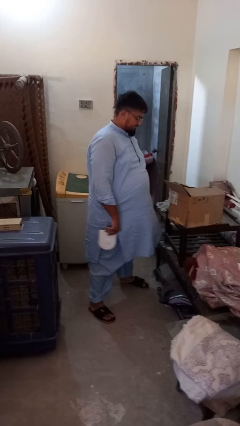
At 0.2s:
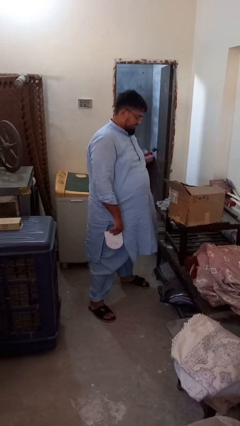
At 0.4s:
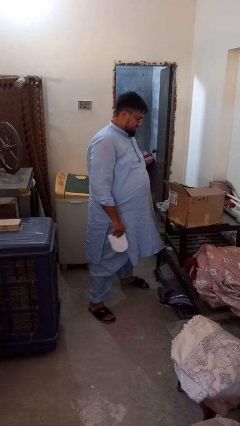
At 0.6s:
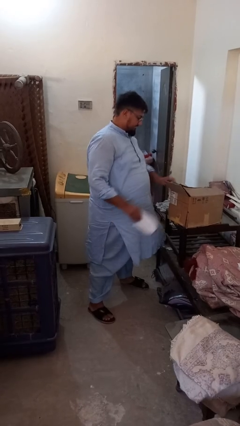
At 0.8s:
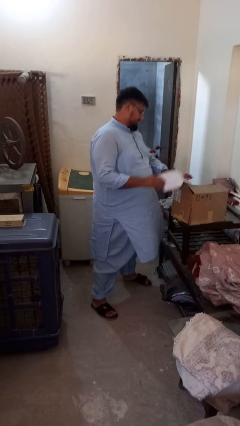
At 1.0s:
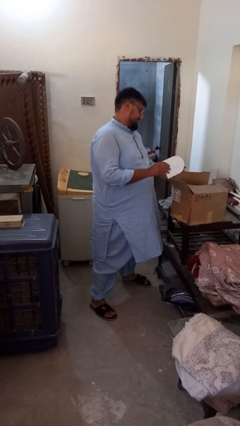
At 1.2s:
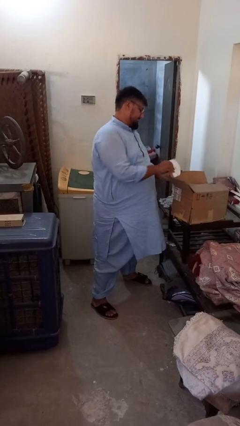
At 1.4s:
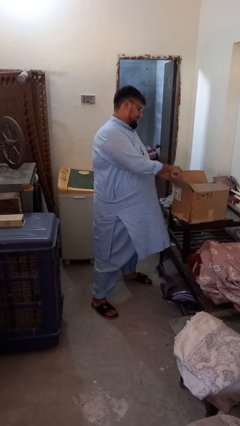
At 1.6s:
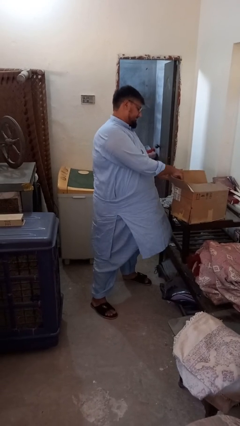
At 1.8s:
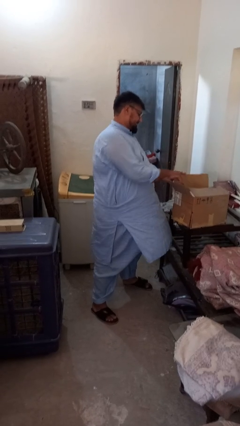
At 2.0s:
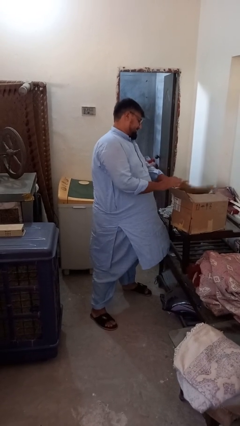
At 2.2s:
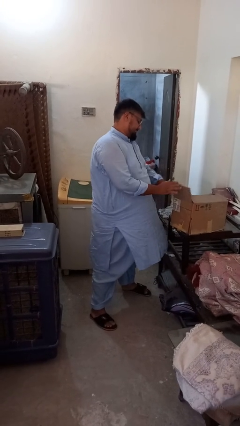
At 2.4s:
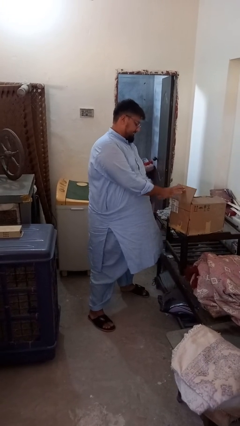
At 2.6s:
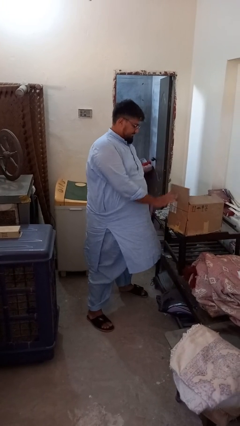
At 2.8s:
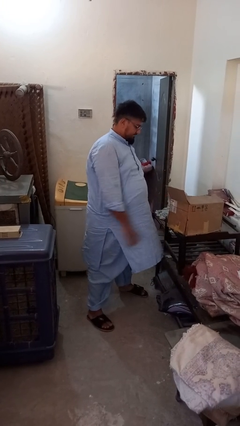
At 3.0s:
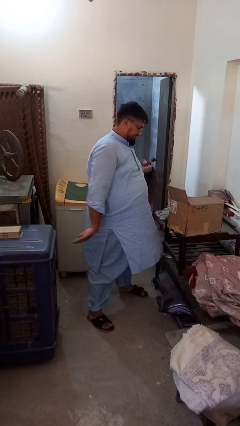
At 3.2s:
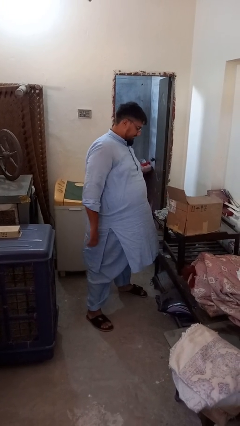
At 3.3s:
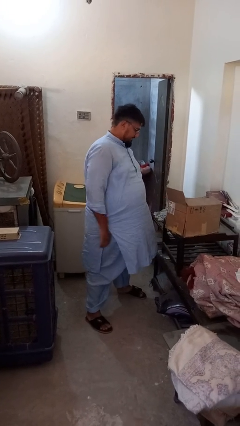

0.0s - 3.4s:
person puts object into box

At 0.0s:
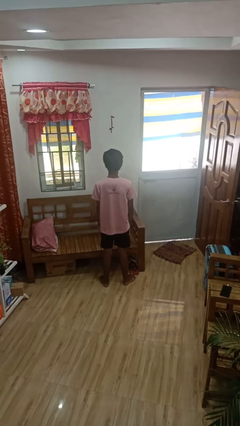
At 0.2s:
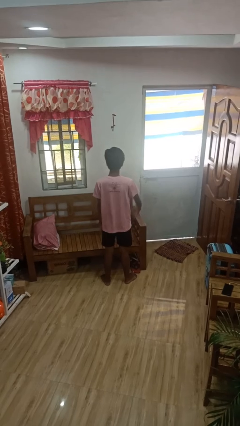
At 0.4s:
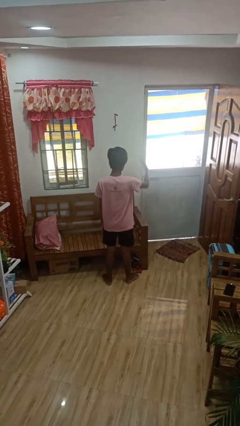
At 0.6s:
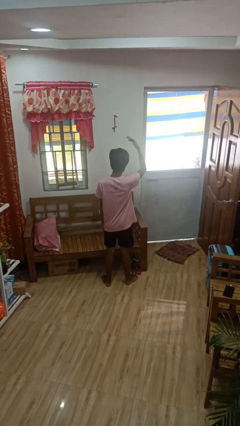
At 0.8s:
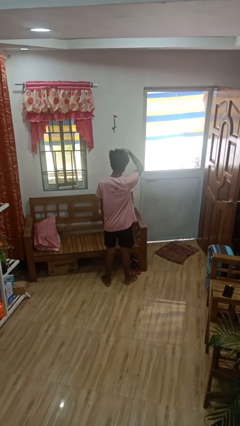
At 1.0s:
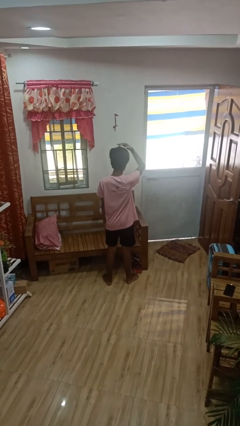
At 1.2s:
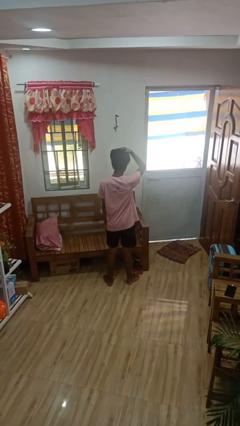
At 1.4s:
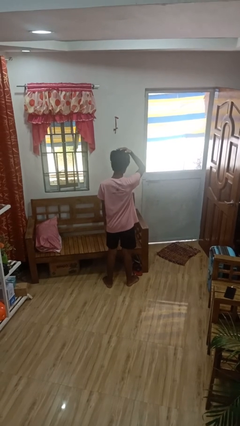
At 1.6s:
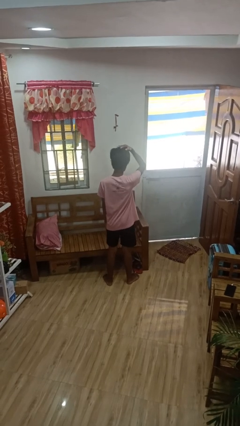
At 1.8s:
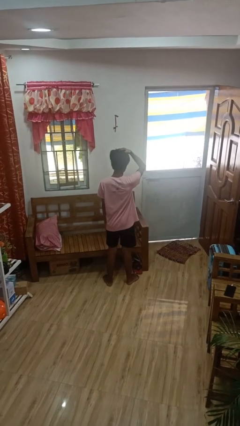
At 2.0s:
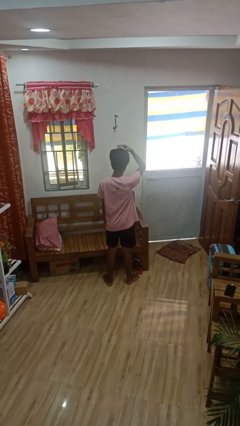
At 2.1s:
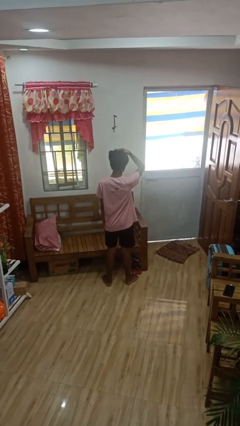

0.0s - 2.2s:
person pats head

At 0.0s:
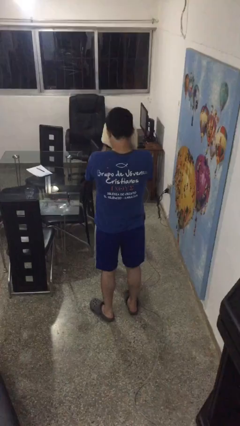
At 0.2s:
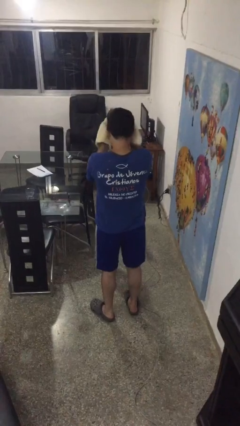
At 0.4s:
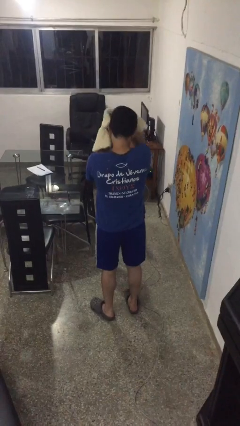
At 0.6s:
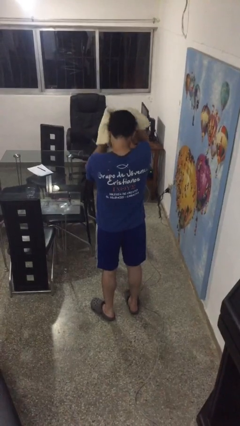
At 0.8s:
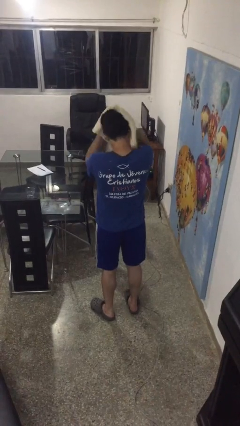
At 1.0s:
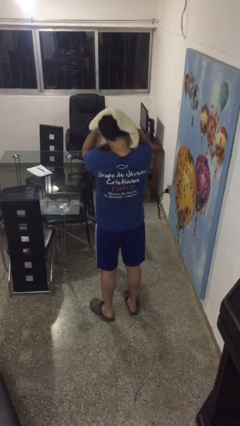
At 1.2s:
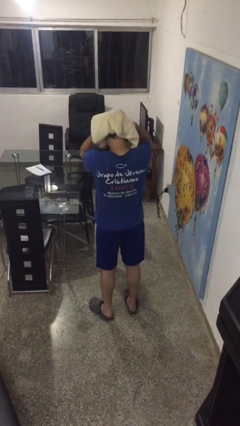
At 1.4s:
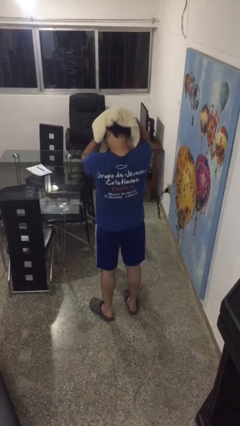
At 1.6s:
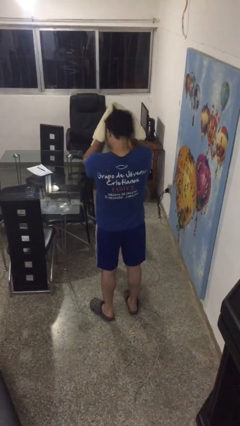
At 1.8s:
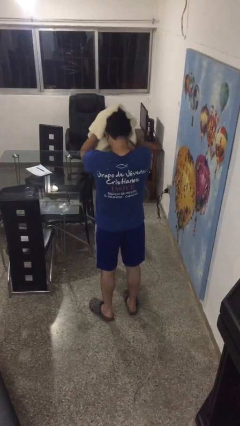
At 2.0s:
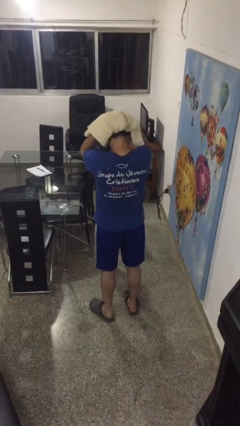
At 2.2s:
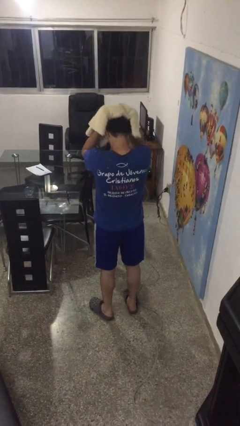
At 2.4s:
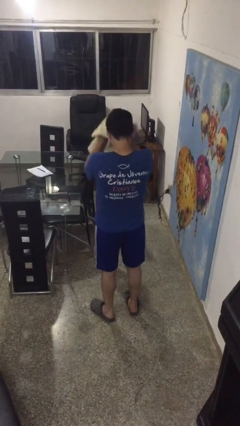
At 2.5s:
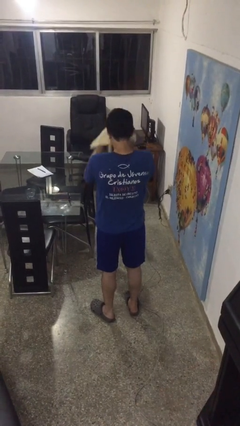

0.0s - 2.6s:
person dries hair with towel

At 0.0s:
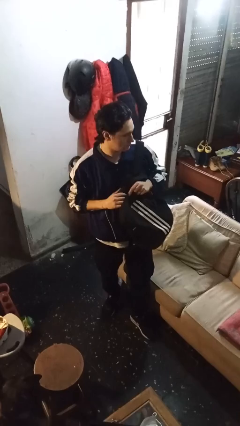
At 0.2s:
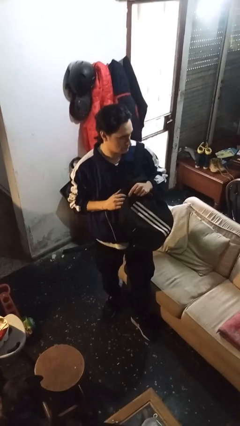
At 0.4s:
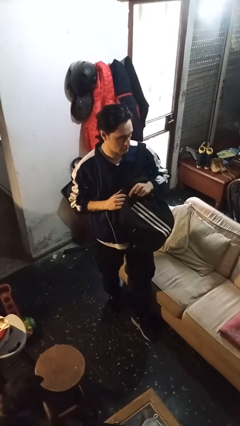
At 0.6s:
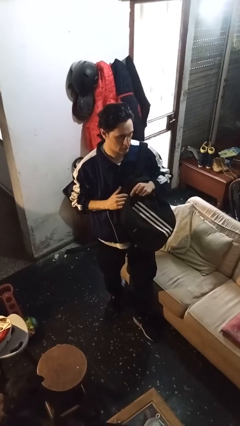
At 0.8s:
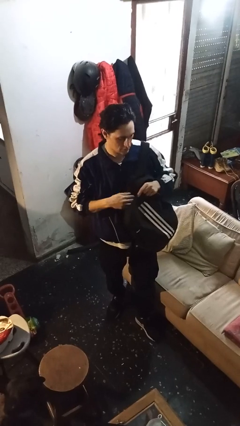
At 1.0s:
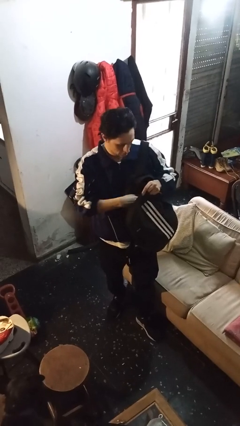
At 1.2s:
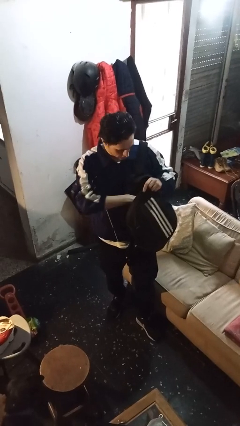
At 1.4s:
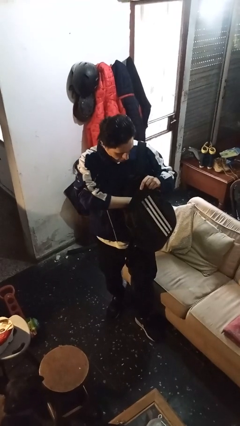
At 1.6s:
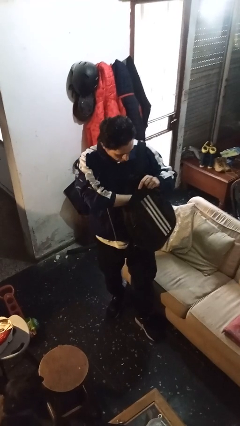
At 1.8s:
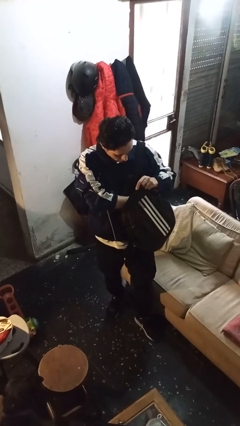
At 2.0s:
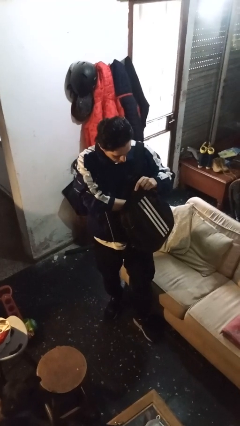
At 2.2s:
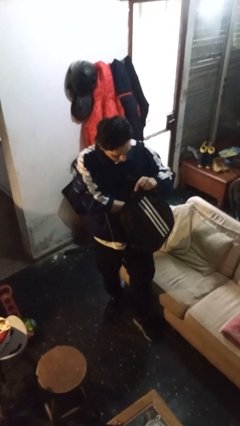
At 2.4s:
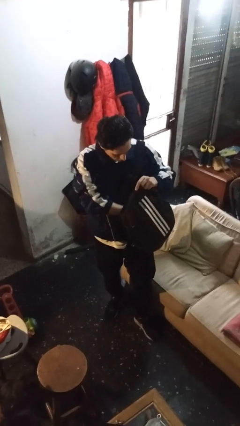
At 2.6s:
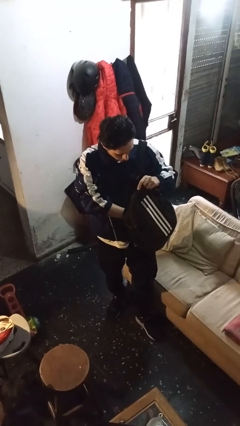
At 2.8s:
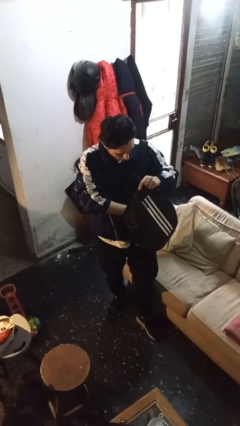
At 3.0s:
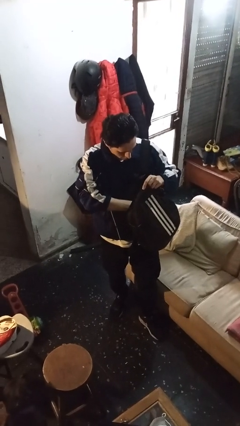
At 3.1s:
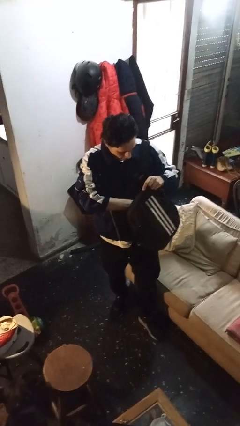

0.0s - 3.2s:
person searches in backpack

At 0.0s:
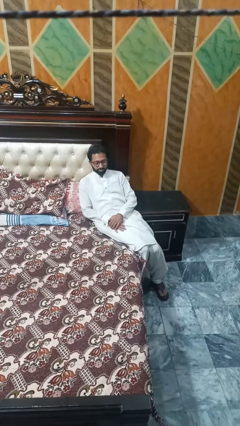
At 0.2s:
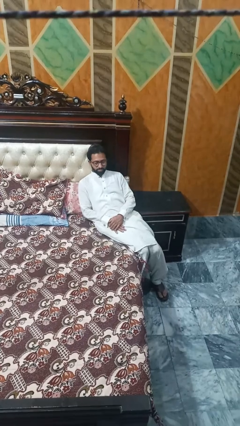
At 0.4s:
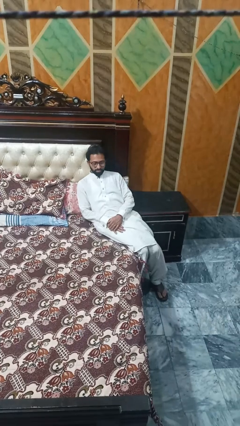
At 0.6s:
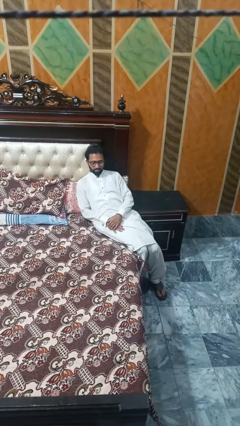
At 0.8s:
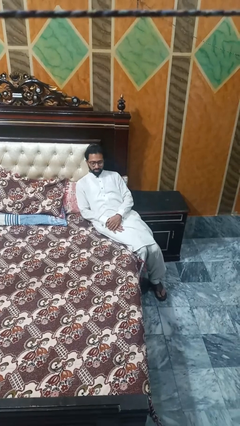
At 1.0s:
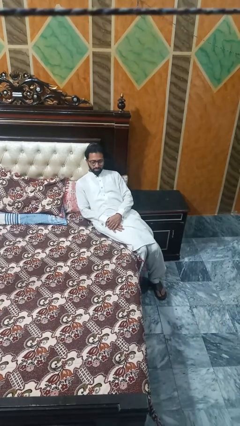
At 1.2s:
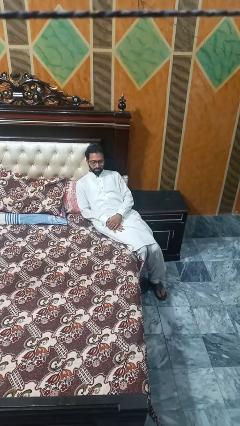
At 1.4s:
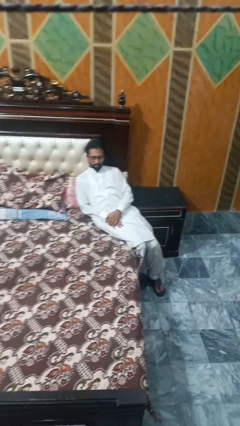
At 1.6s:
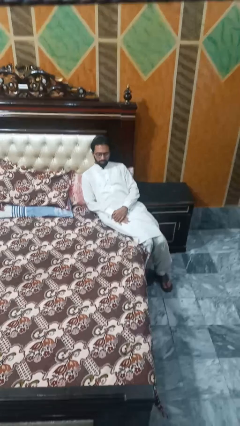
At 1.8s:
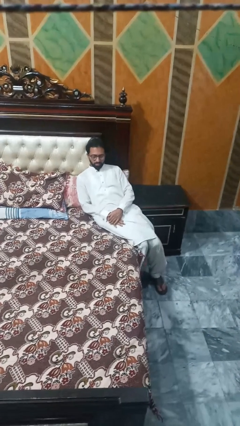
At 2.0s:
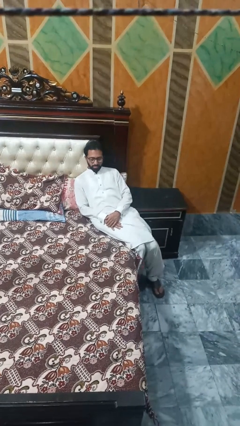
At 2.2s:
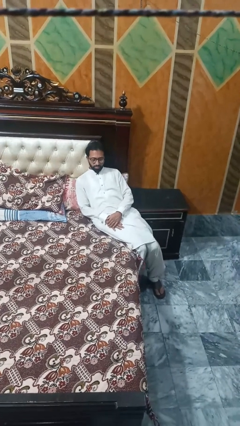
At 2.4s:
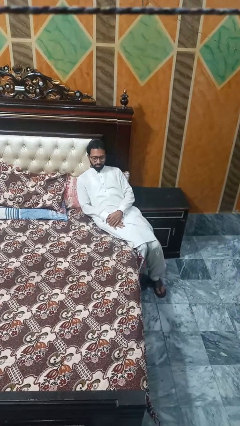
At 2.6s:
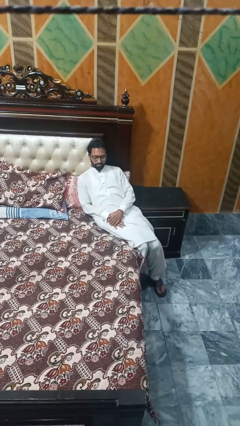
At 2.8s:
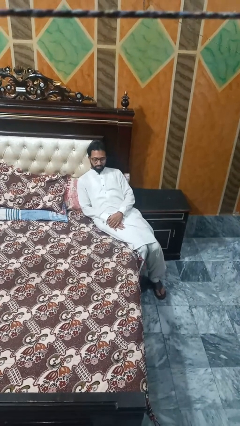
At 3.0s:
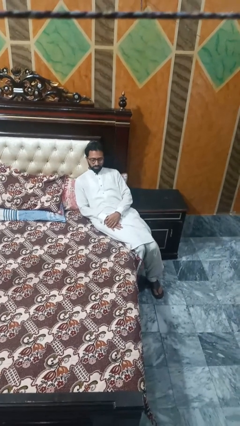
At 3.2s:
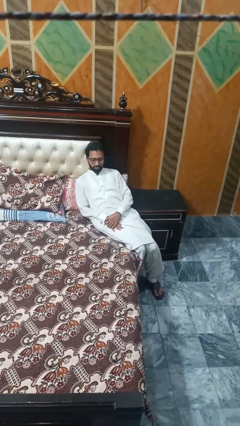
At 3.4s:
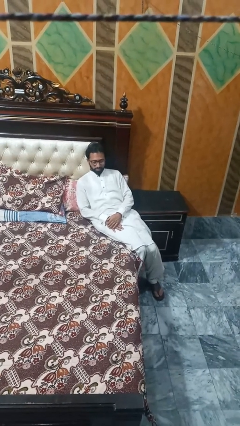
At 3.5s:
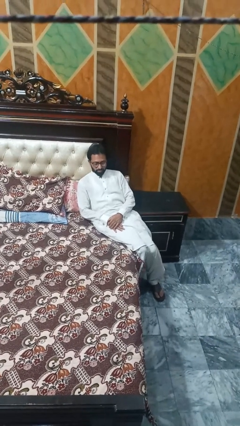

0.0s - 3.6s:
person lies down on bed

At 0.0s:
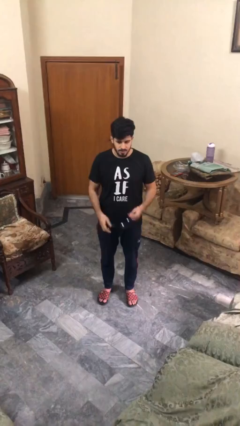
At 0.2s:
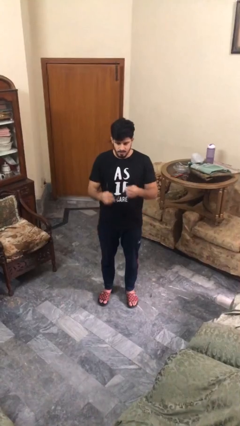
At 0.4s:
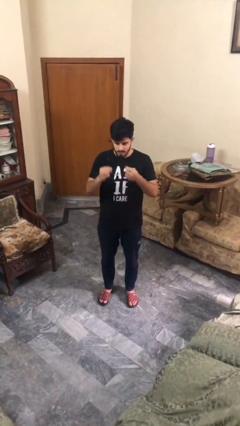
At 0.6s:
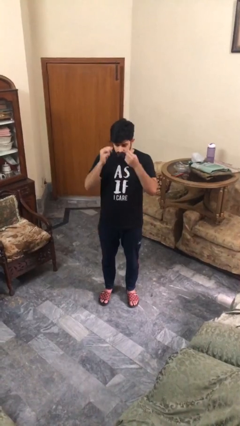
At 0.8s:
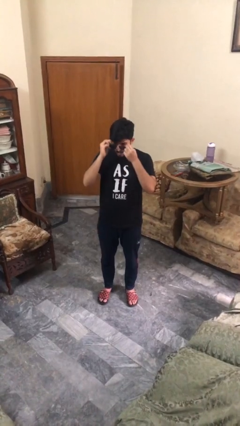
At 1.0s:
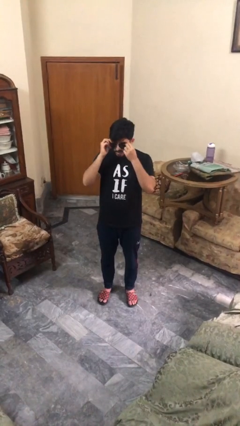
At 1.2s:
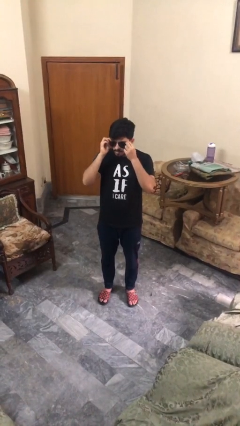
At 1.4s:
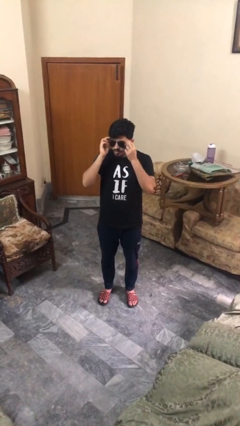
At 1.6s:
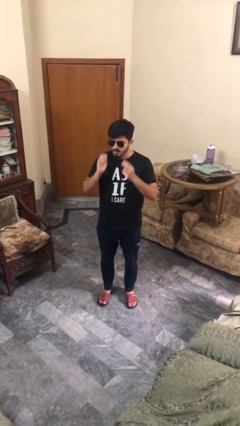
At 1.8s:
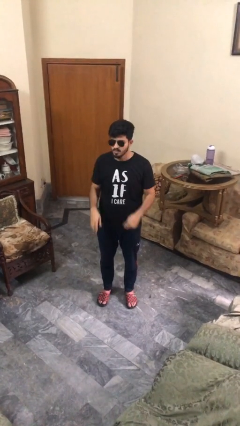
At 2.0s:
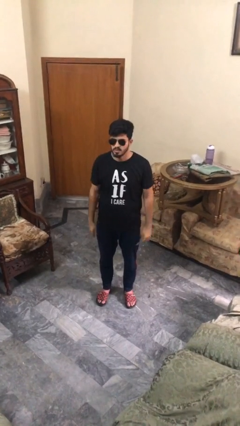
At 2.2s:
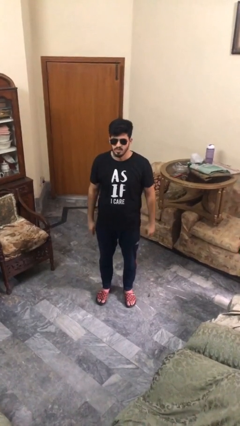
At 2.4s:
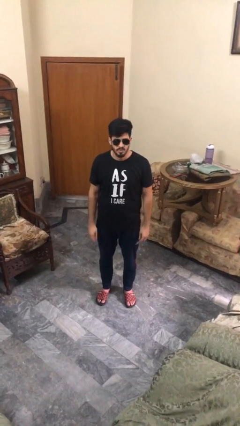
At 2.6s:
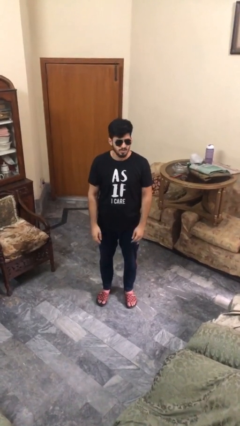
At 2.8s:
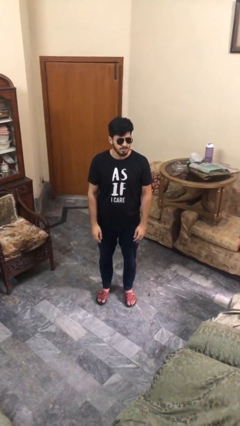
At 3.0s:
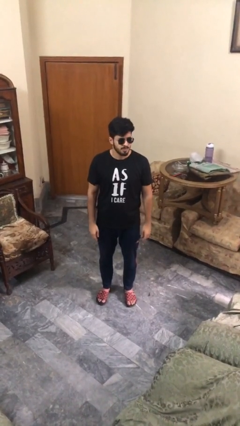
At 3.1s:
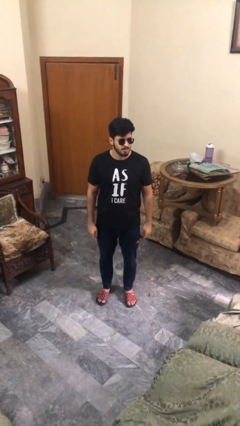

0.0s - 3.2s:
person puts on sunglasses
